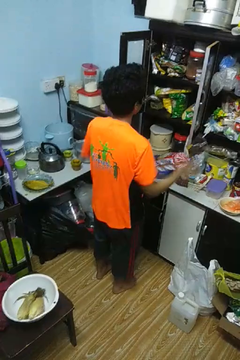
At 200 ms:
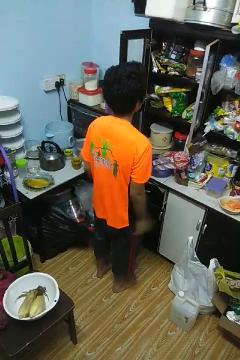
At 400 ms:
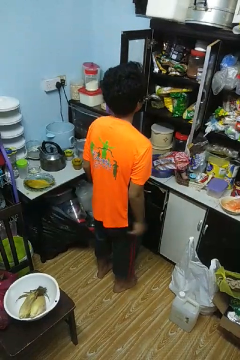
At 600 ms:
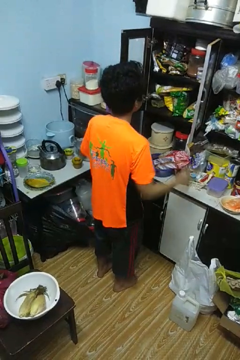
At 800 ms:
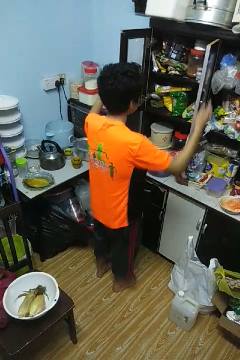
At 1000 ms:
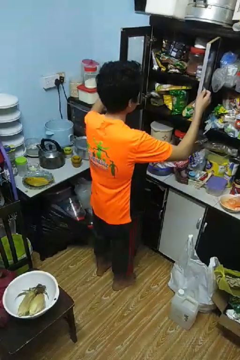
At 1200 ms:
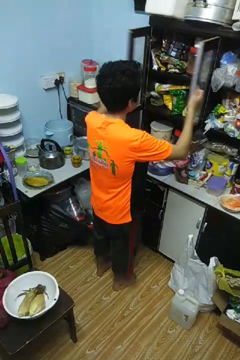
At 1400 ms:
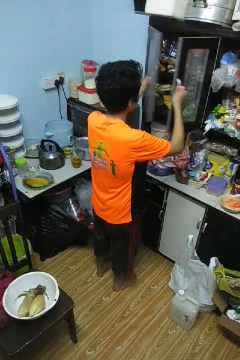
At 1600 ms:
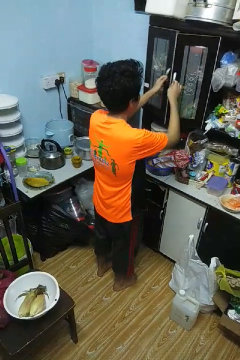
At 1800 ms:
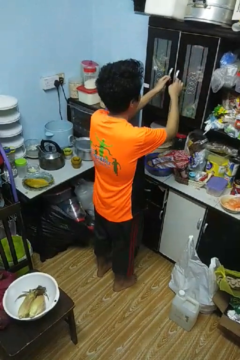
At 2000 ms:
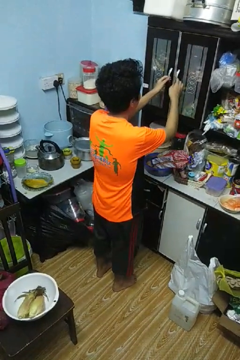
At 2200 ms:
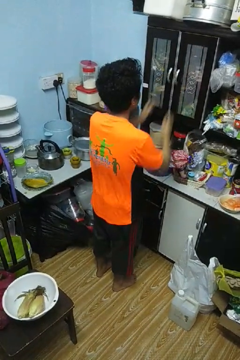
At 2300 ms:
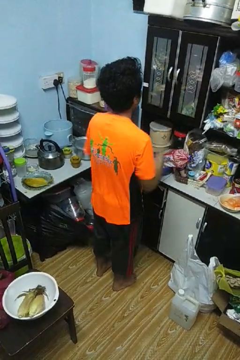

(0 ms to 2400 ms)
person closes cabinet

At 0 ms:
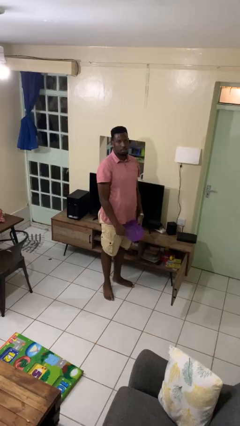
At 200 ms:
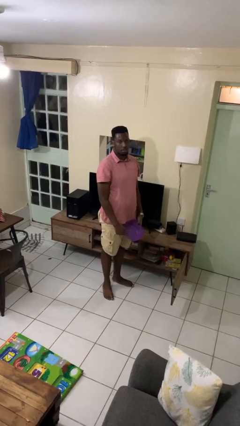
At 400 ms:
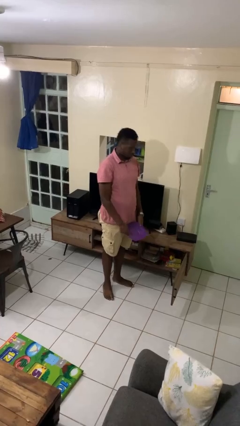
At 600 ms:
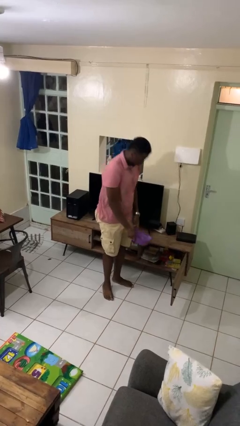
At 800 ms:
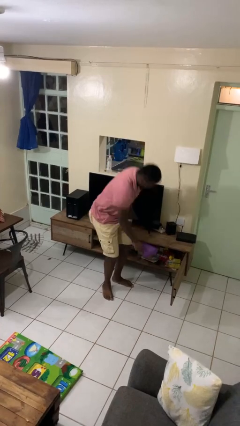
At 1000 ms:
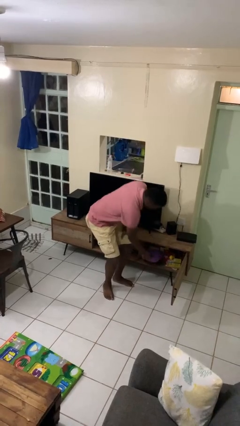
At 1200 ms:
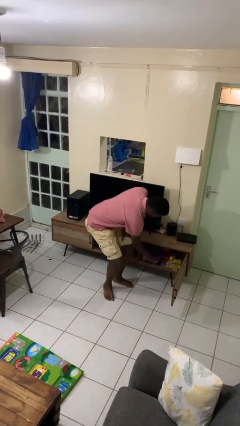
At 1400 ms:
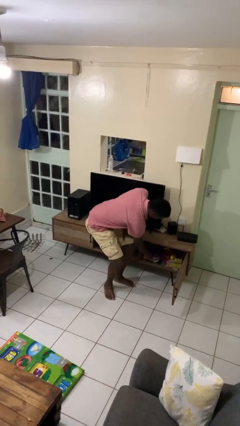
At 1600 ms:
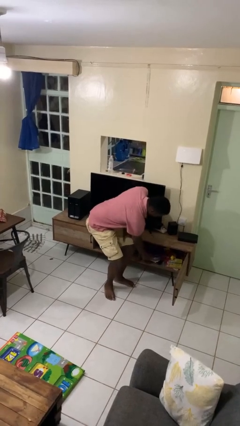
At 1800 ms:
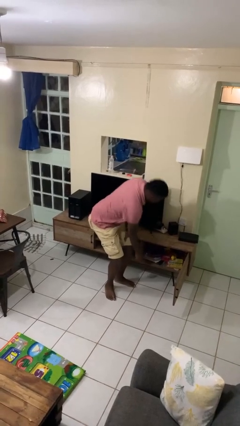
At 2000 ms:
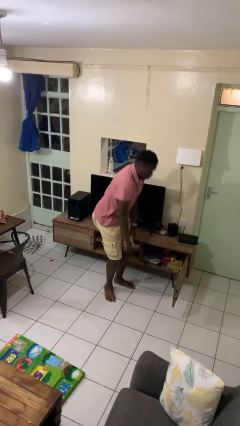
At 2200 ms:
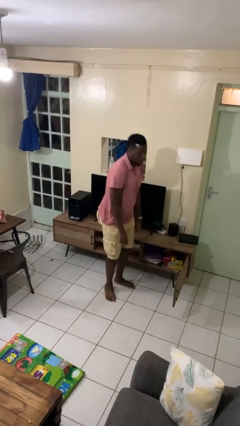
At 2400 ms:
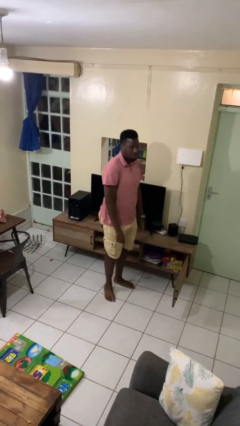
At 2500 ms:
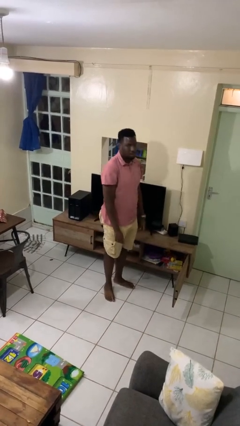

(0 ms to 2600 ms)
person puts down object into cabinet

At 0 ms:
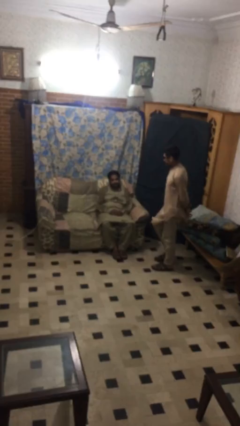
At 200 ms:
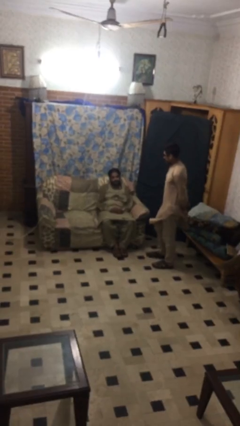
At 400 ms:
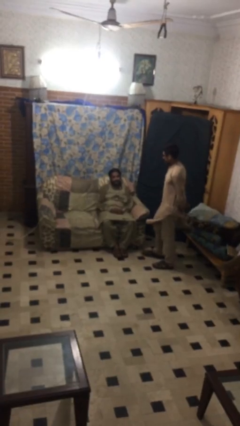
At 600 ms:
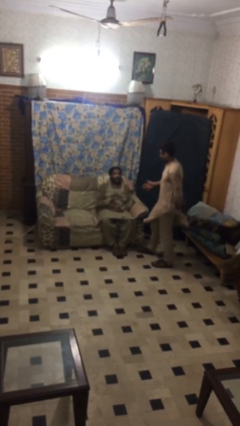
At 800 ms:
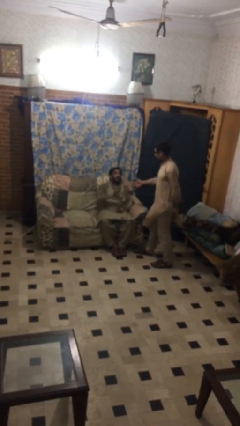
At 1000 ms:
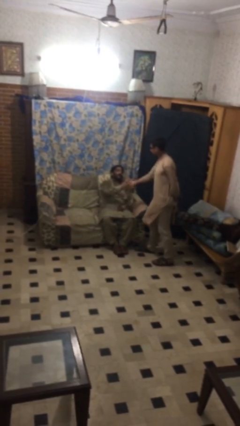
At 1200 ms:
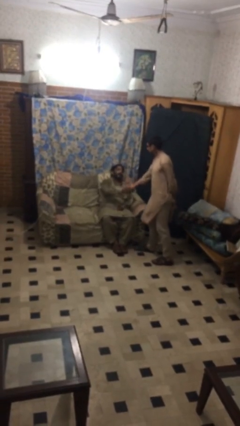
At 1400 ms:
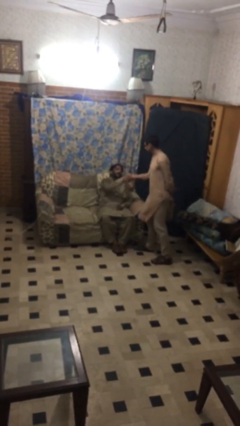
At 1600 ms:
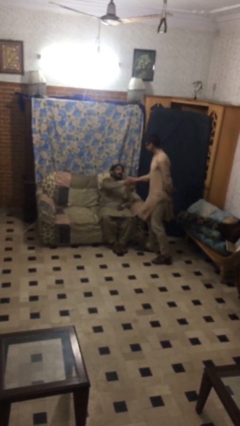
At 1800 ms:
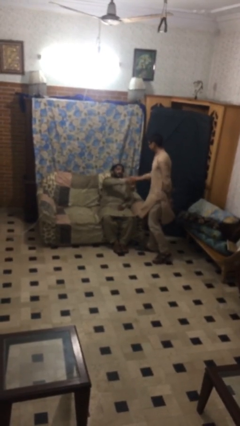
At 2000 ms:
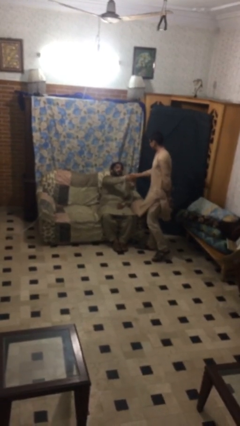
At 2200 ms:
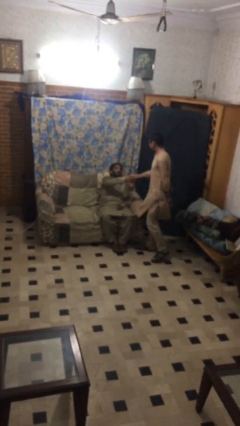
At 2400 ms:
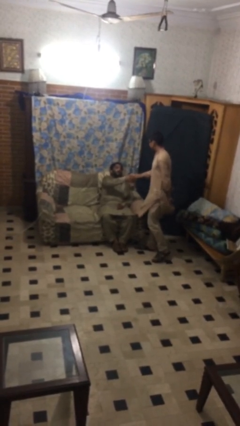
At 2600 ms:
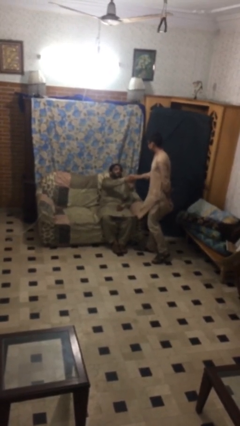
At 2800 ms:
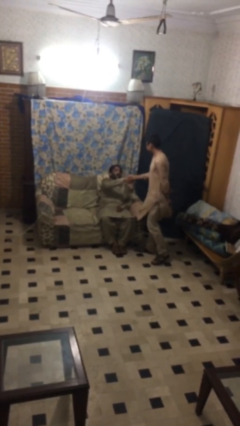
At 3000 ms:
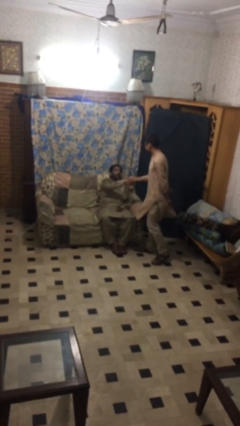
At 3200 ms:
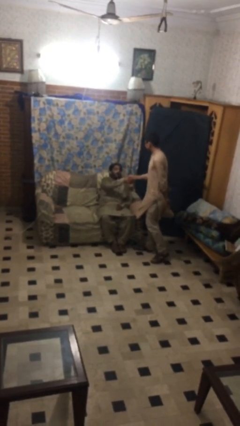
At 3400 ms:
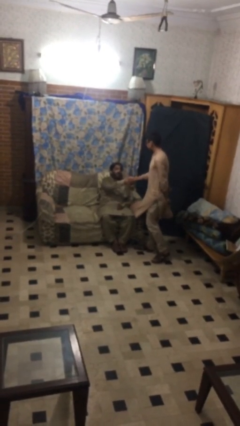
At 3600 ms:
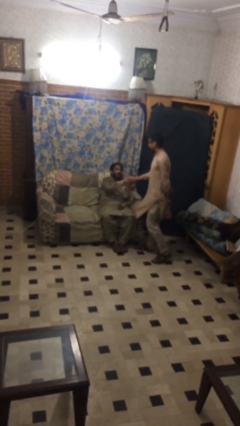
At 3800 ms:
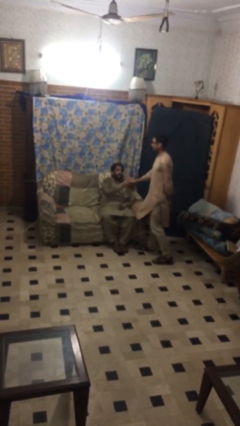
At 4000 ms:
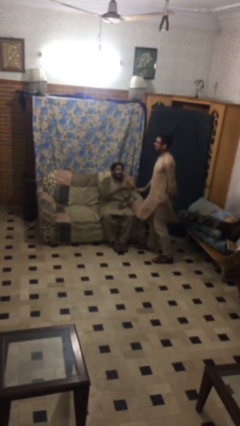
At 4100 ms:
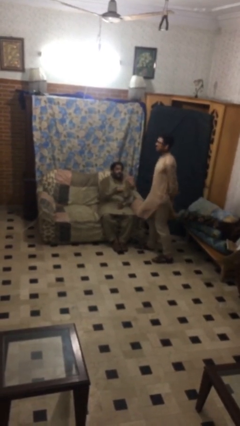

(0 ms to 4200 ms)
person shakes hand

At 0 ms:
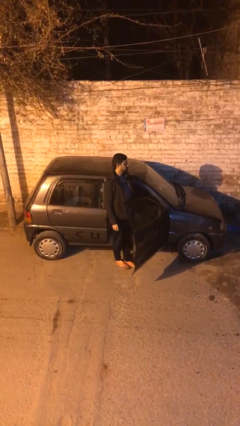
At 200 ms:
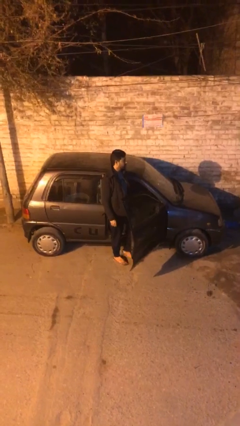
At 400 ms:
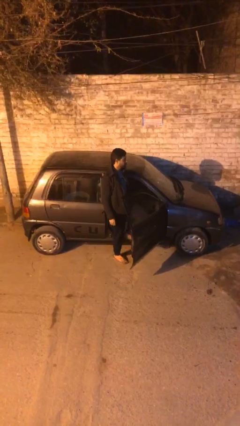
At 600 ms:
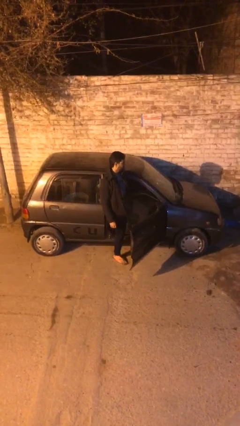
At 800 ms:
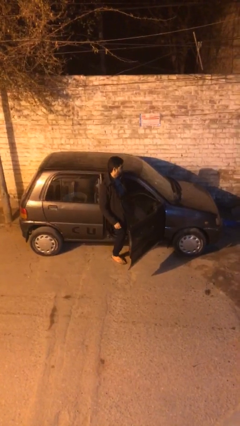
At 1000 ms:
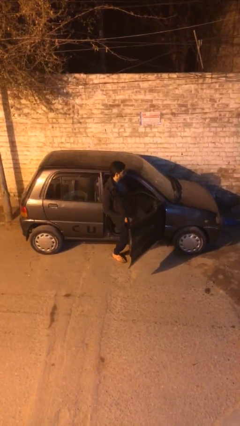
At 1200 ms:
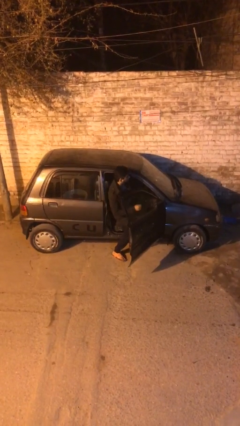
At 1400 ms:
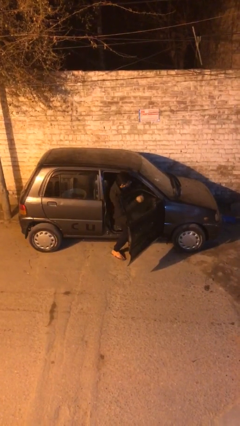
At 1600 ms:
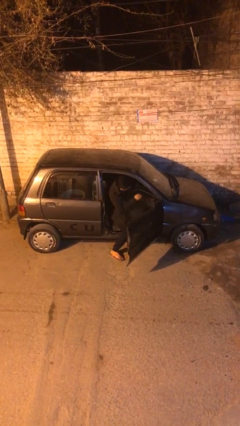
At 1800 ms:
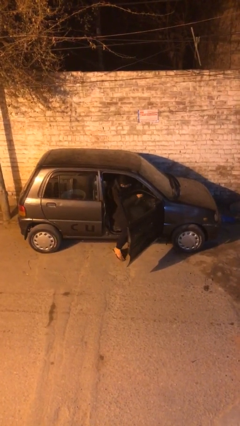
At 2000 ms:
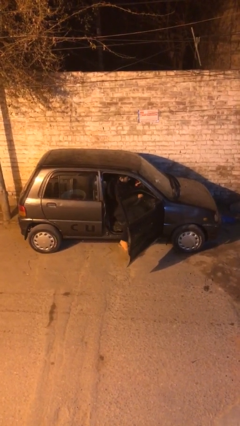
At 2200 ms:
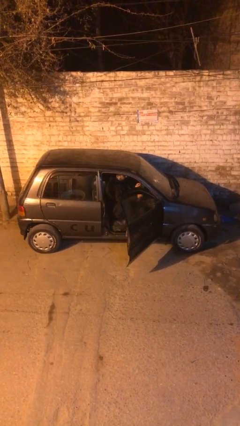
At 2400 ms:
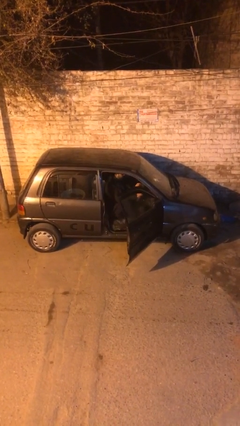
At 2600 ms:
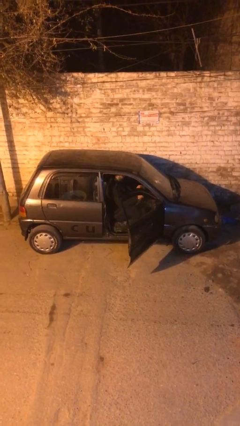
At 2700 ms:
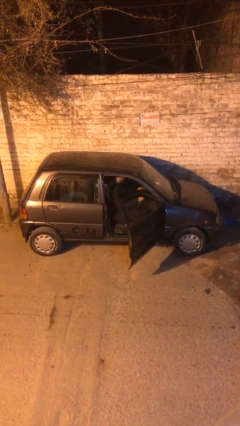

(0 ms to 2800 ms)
person enters car

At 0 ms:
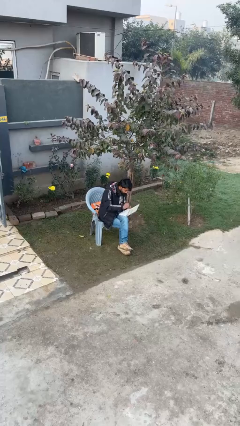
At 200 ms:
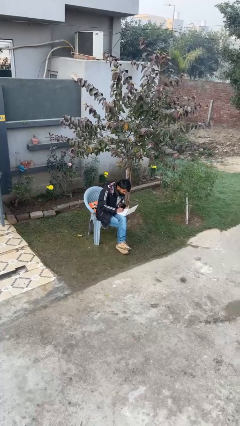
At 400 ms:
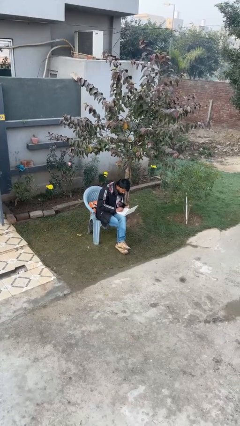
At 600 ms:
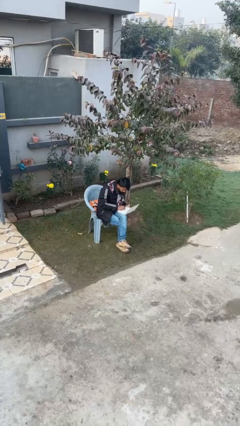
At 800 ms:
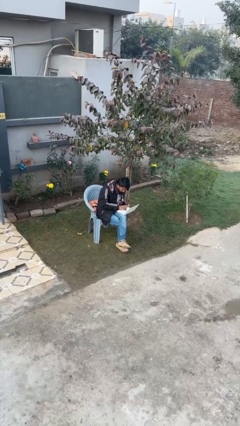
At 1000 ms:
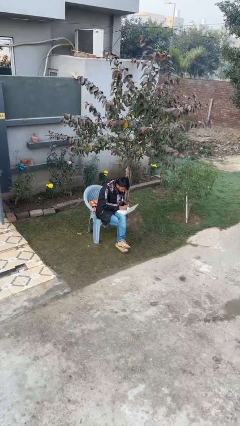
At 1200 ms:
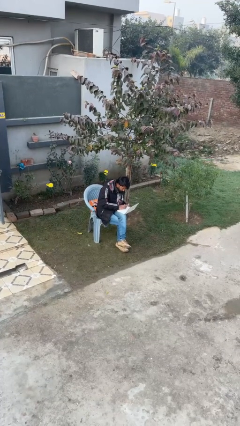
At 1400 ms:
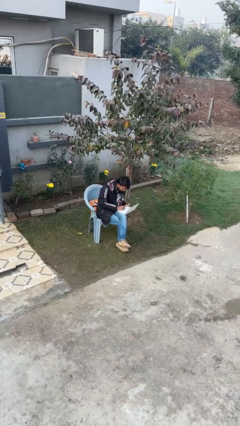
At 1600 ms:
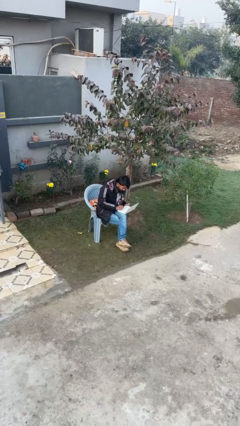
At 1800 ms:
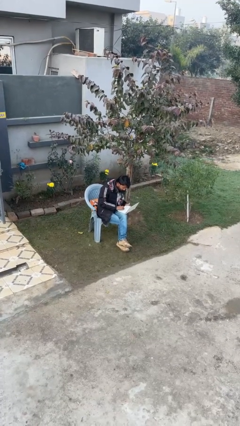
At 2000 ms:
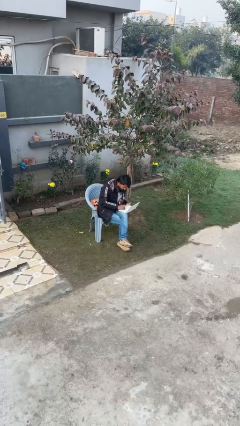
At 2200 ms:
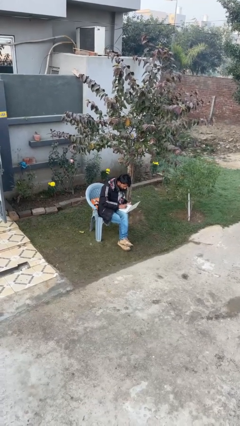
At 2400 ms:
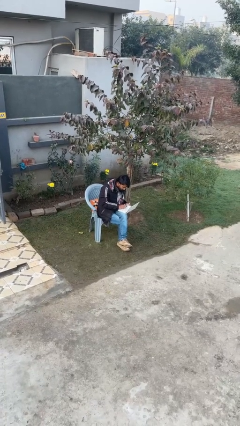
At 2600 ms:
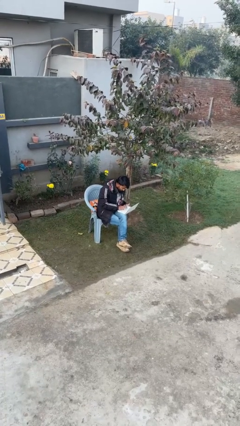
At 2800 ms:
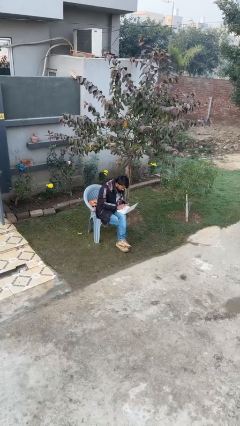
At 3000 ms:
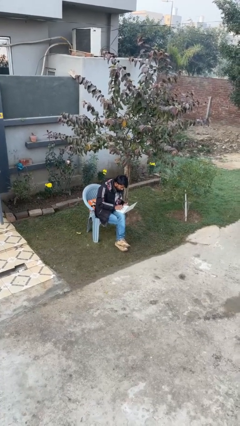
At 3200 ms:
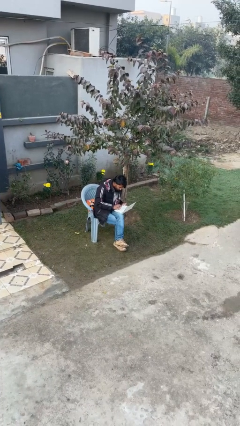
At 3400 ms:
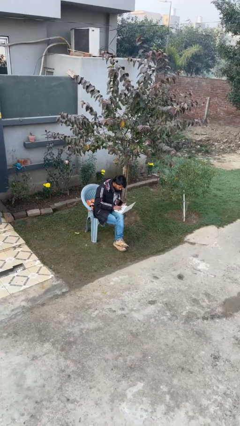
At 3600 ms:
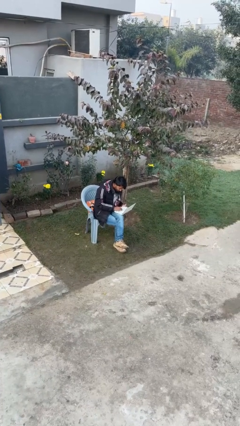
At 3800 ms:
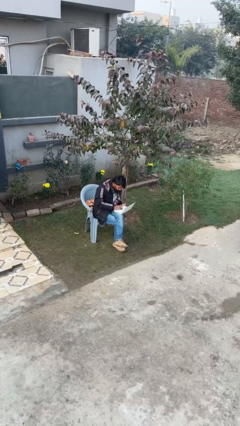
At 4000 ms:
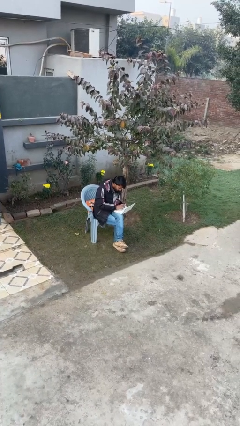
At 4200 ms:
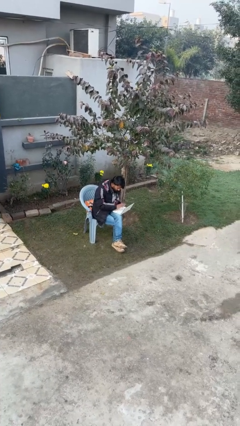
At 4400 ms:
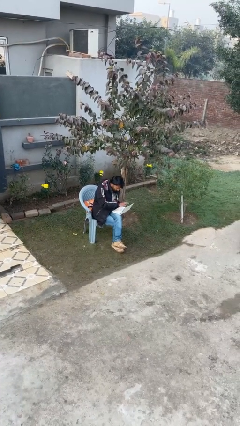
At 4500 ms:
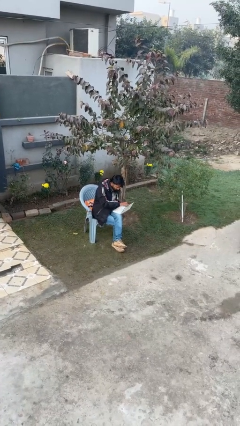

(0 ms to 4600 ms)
person interacts with laptop

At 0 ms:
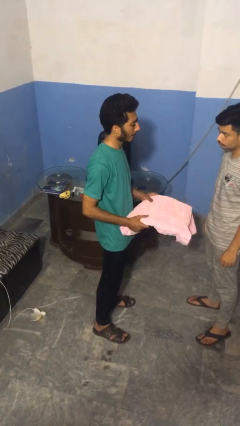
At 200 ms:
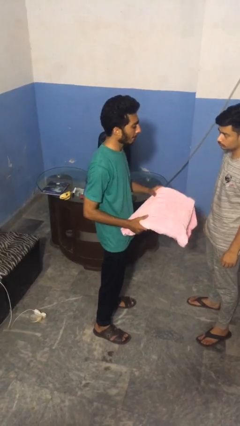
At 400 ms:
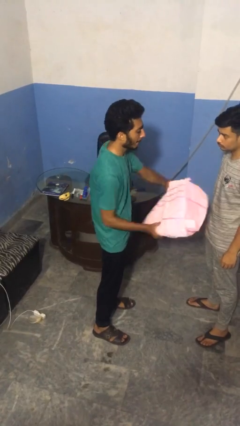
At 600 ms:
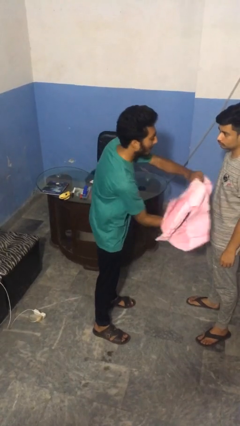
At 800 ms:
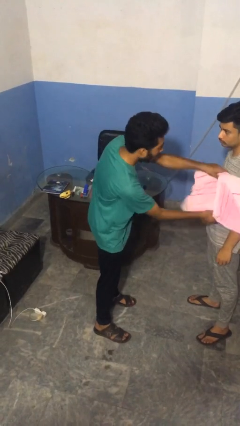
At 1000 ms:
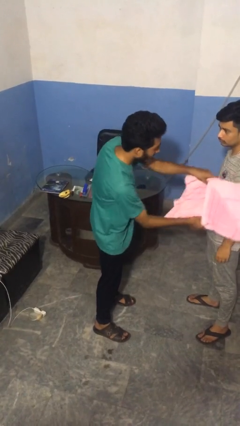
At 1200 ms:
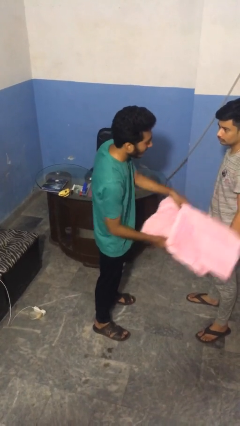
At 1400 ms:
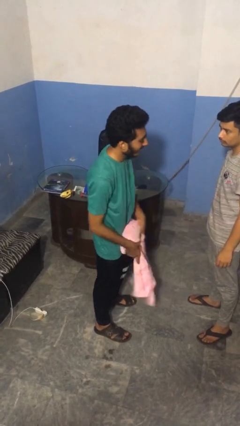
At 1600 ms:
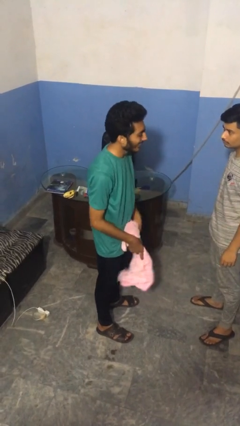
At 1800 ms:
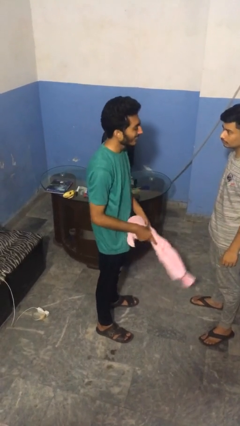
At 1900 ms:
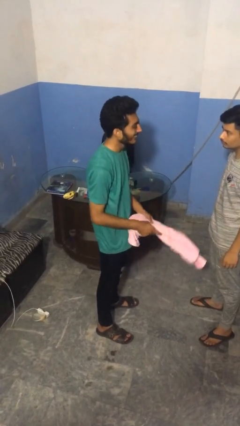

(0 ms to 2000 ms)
person hits person with pillow
